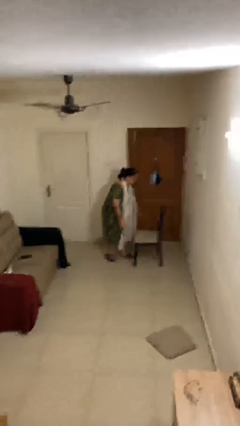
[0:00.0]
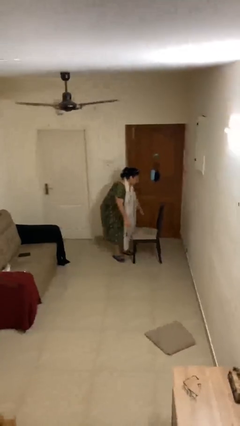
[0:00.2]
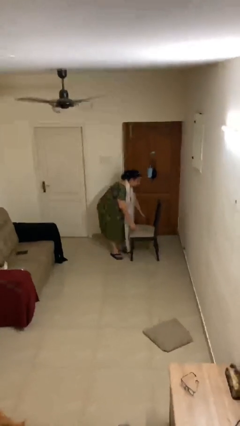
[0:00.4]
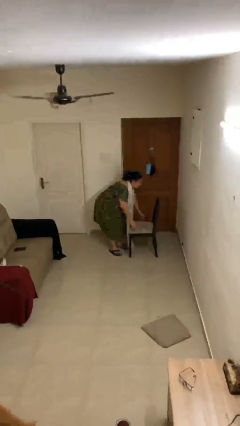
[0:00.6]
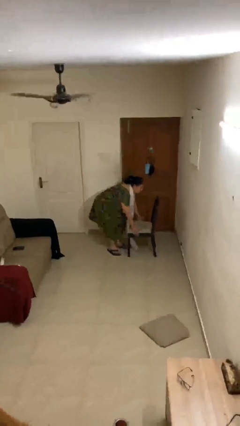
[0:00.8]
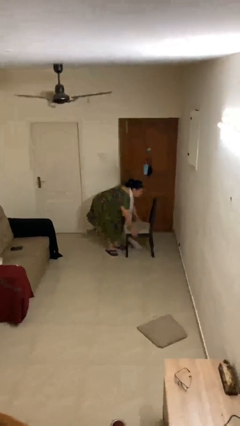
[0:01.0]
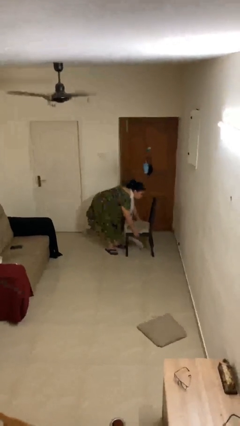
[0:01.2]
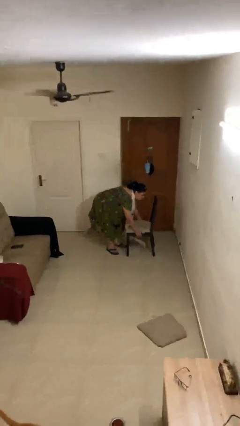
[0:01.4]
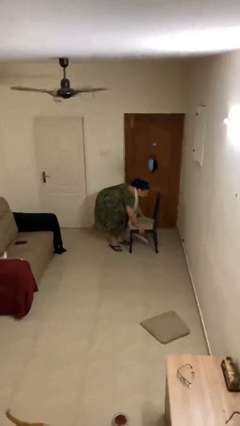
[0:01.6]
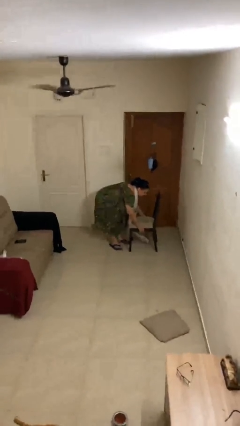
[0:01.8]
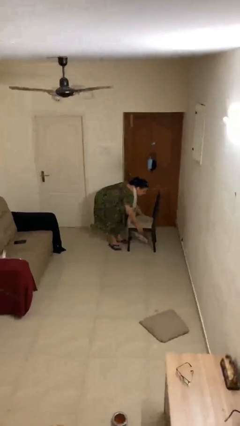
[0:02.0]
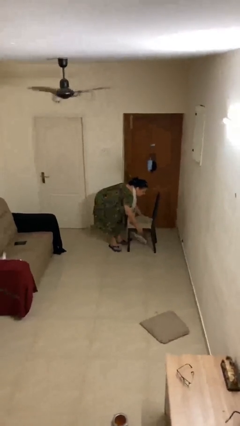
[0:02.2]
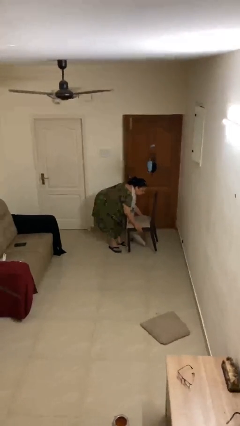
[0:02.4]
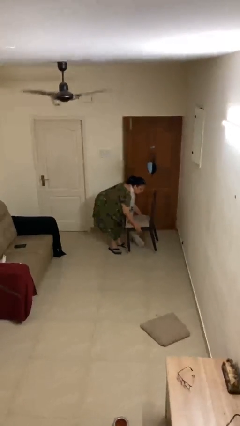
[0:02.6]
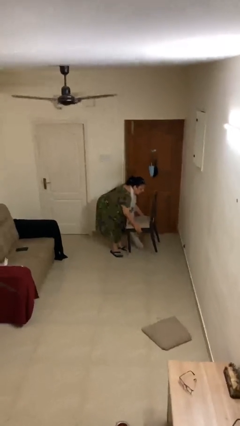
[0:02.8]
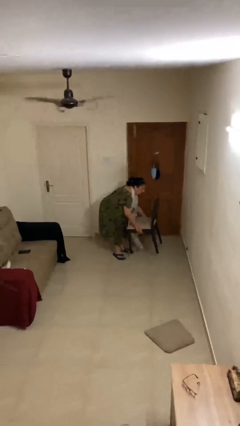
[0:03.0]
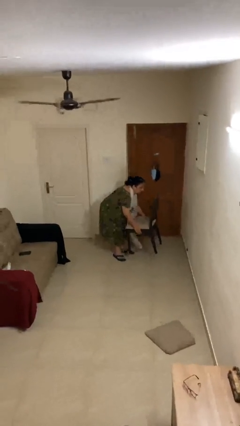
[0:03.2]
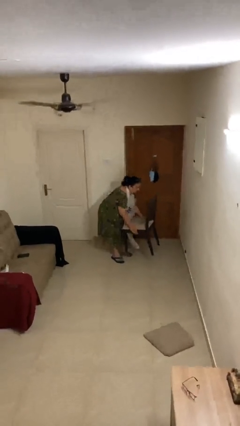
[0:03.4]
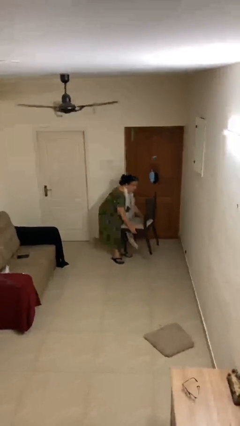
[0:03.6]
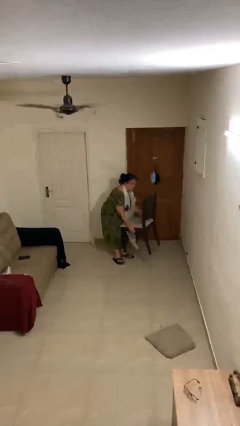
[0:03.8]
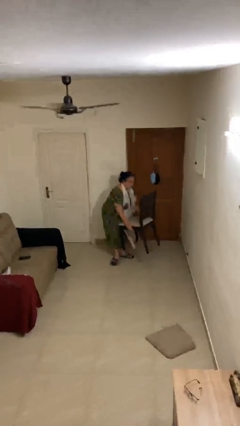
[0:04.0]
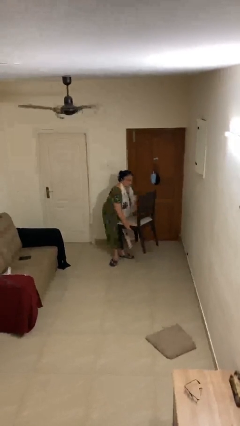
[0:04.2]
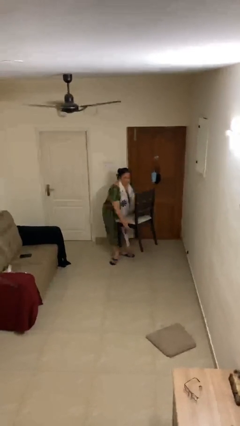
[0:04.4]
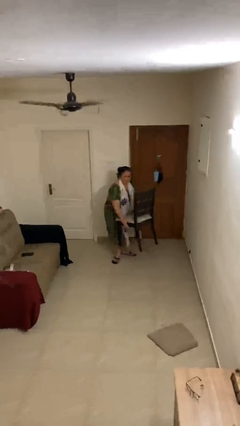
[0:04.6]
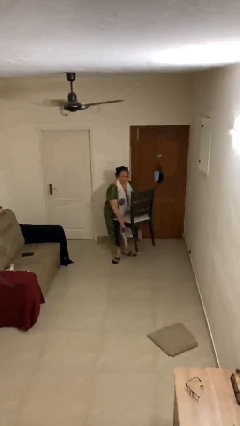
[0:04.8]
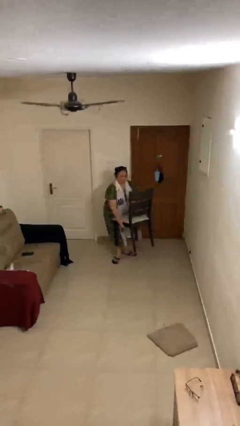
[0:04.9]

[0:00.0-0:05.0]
person picks up object from floor

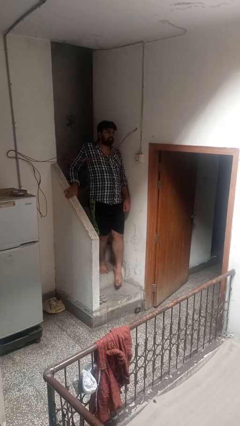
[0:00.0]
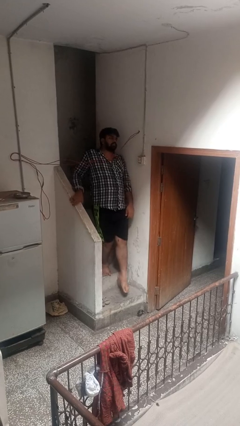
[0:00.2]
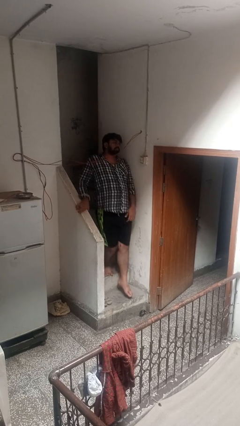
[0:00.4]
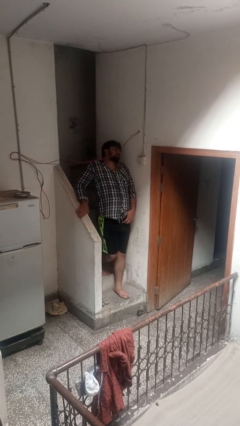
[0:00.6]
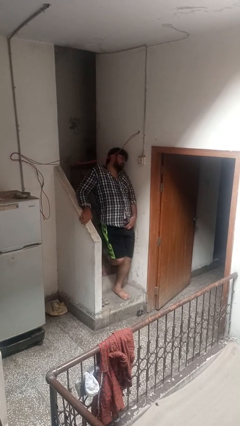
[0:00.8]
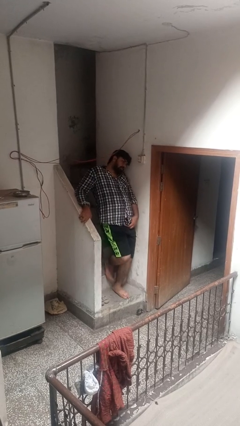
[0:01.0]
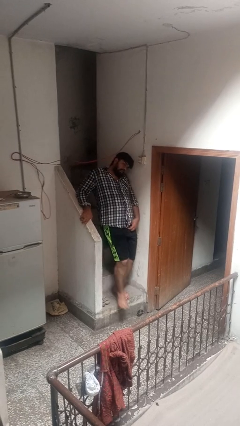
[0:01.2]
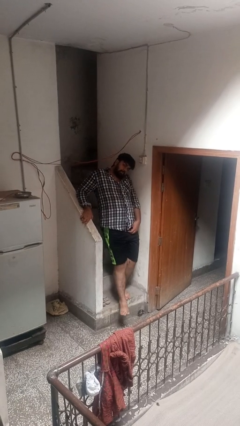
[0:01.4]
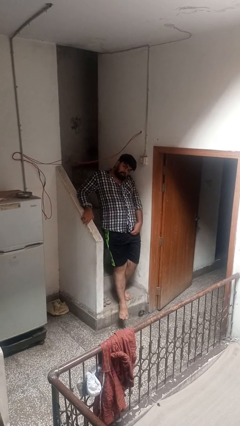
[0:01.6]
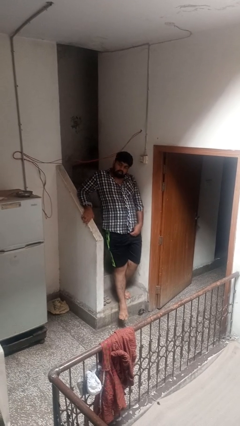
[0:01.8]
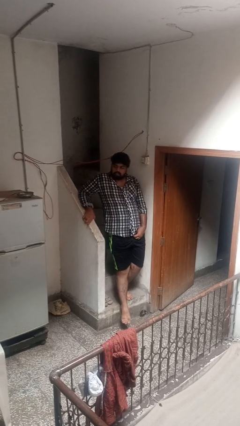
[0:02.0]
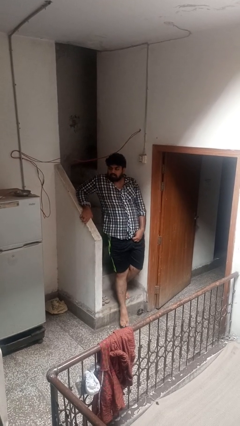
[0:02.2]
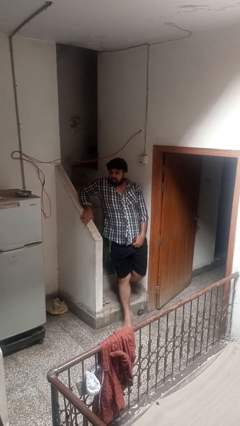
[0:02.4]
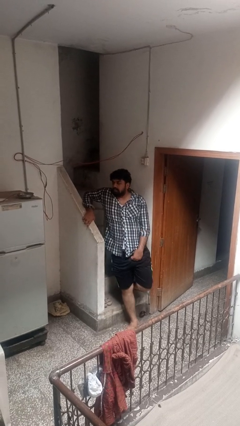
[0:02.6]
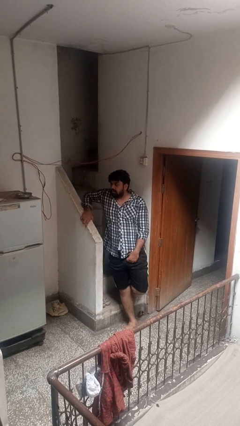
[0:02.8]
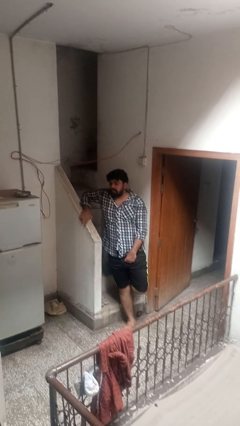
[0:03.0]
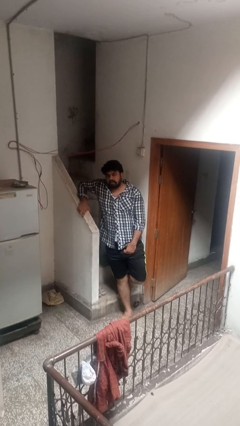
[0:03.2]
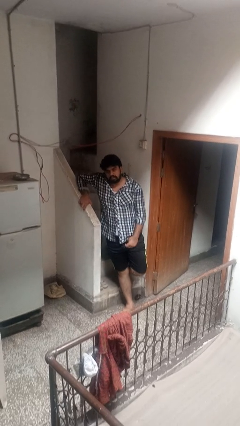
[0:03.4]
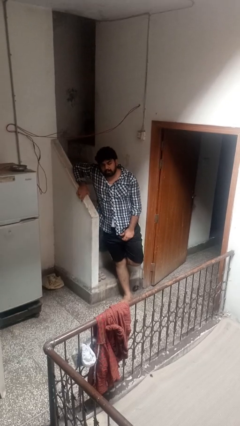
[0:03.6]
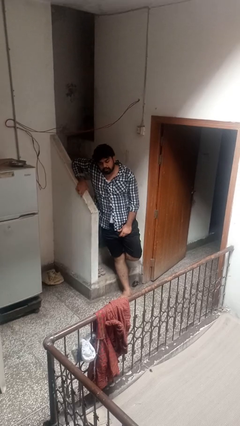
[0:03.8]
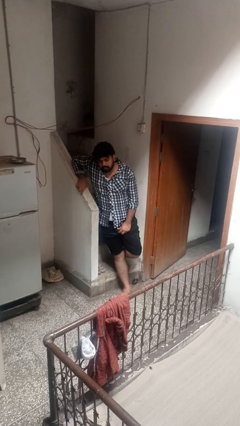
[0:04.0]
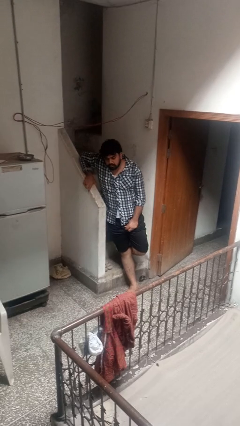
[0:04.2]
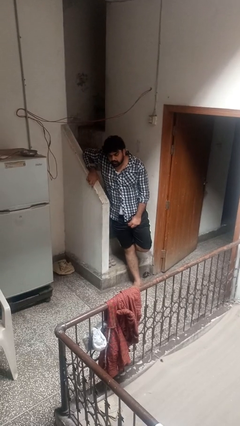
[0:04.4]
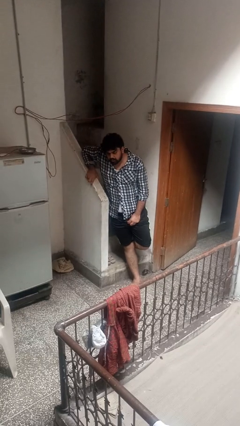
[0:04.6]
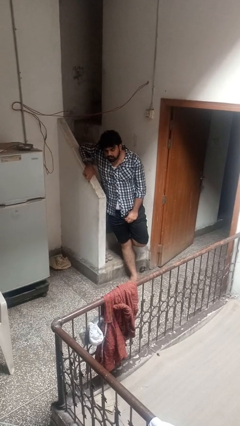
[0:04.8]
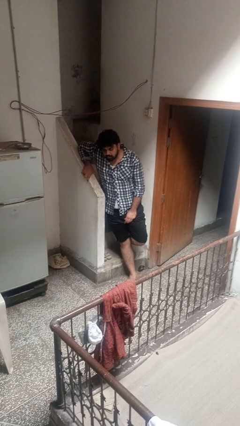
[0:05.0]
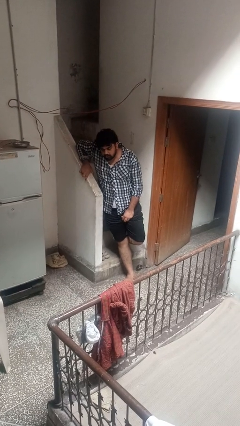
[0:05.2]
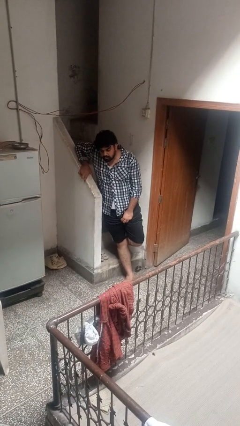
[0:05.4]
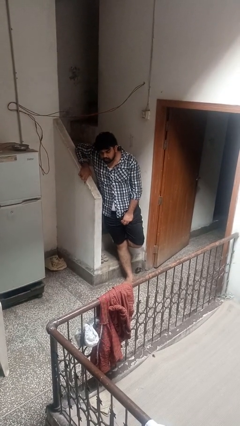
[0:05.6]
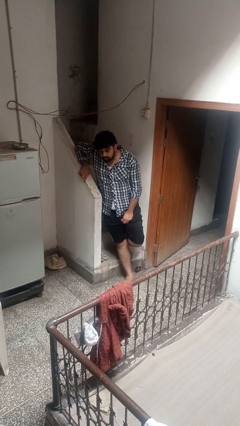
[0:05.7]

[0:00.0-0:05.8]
person trips on stair

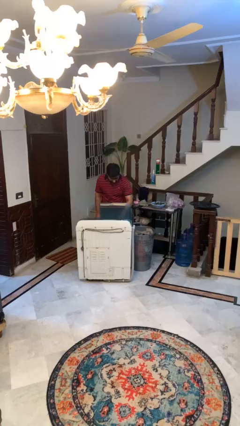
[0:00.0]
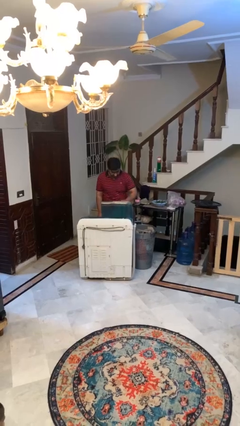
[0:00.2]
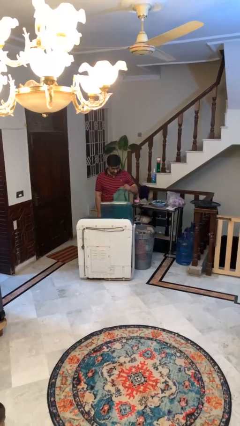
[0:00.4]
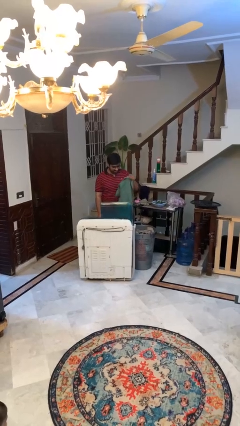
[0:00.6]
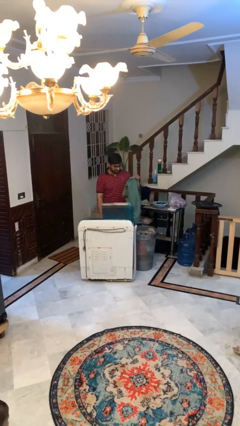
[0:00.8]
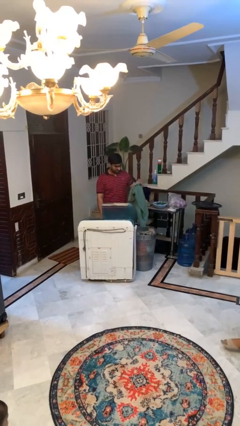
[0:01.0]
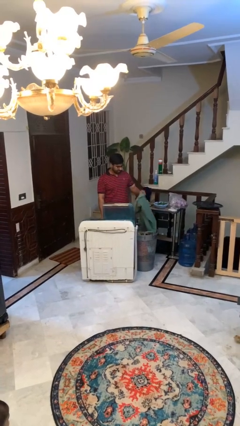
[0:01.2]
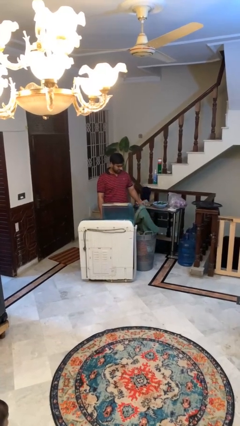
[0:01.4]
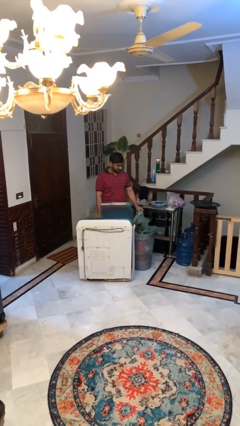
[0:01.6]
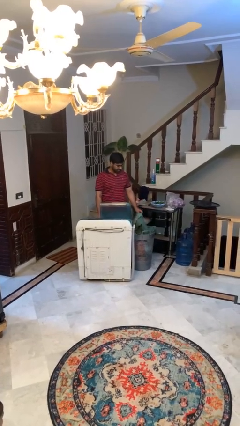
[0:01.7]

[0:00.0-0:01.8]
person unloads clotheswasher

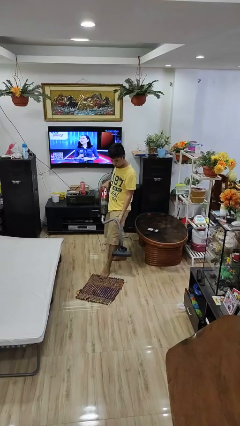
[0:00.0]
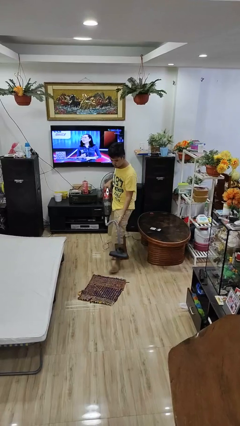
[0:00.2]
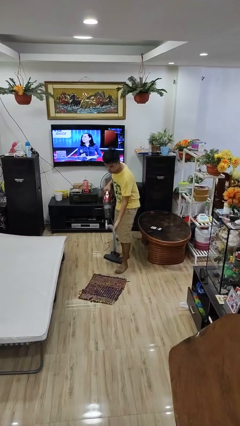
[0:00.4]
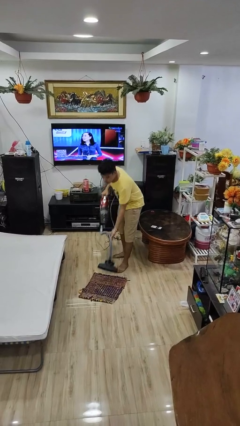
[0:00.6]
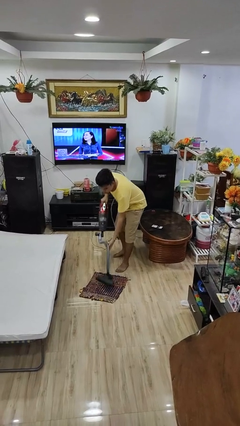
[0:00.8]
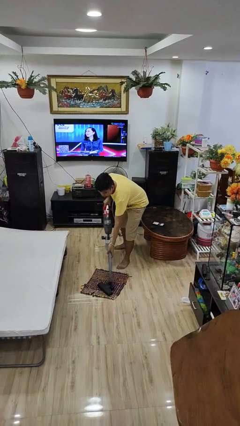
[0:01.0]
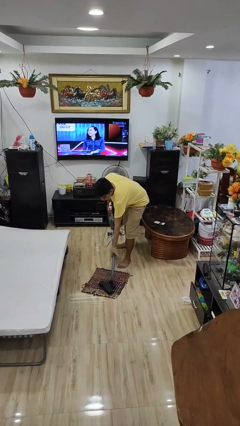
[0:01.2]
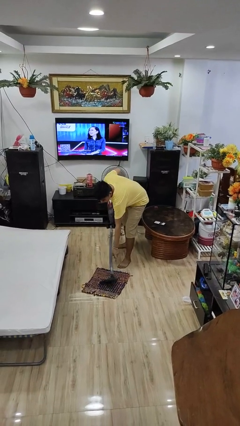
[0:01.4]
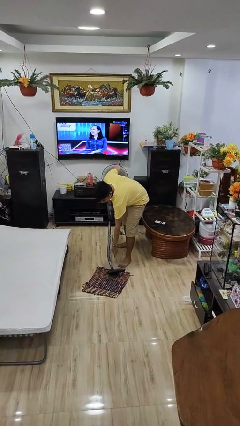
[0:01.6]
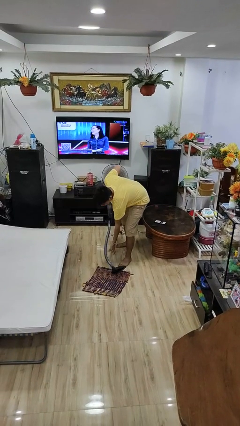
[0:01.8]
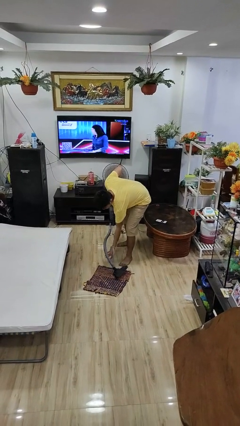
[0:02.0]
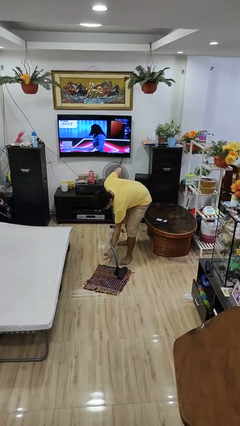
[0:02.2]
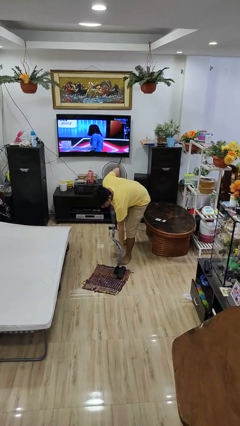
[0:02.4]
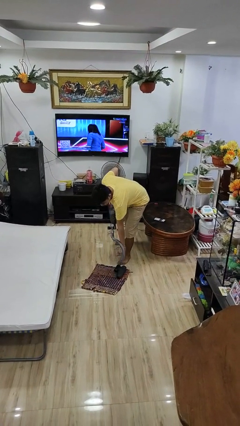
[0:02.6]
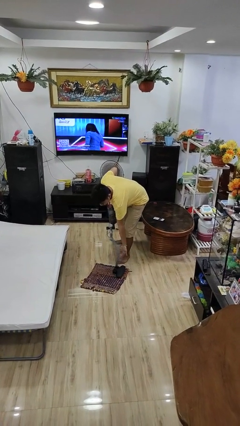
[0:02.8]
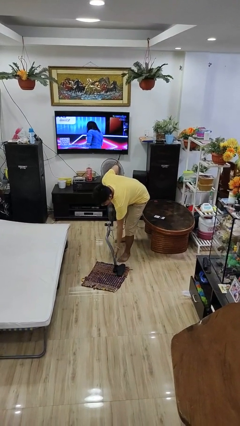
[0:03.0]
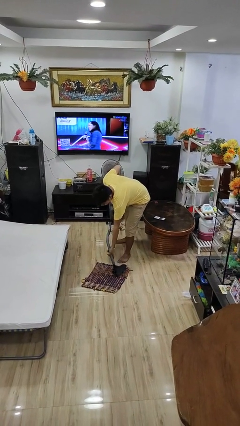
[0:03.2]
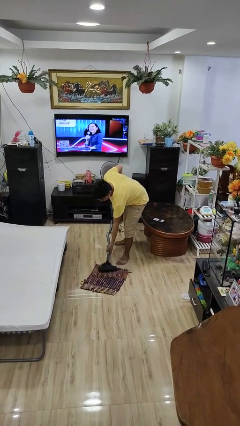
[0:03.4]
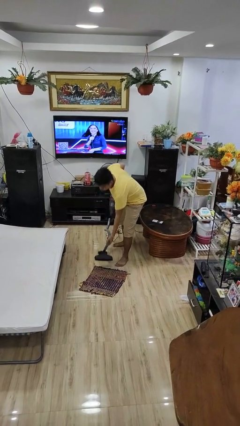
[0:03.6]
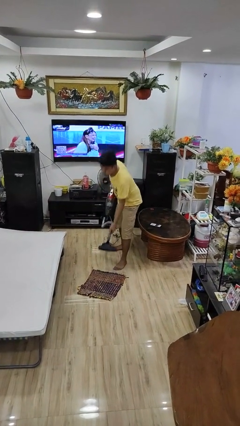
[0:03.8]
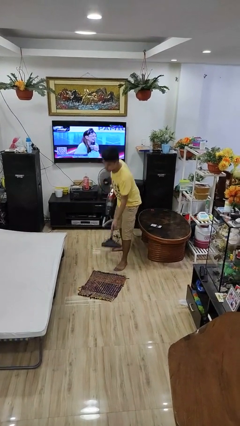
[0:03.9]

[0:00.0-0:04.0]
person vacuums carpet

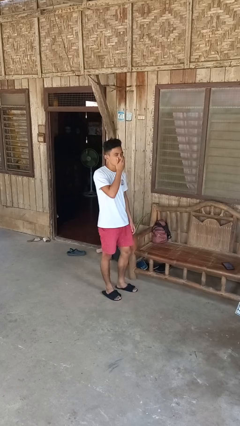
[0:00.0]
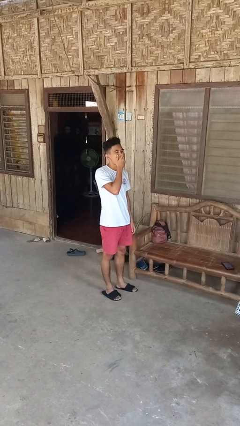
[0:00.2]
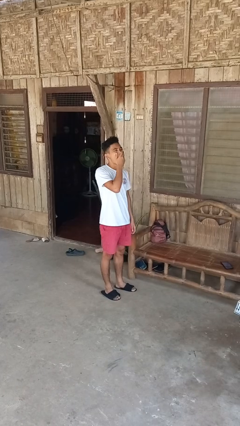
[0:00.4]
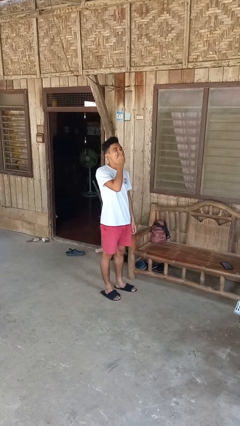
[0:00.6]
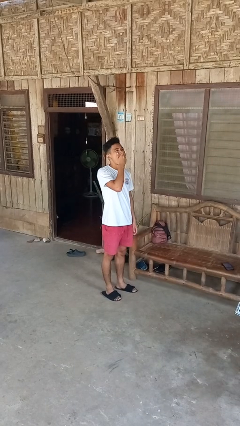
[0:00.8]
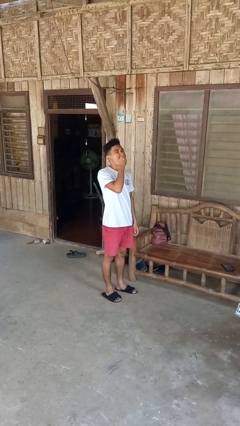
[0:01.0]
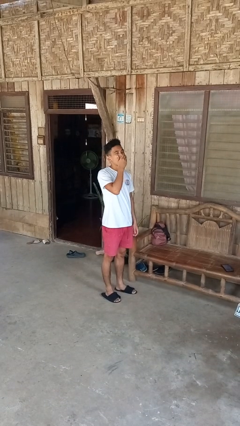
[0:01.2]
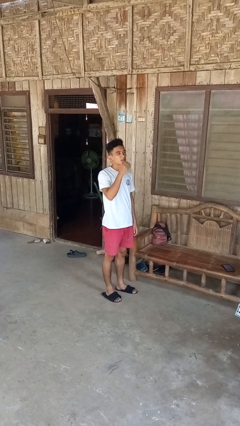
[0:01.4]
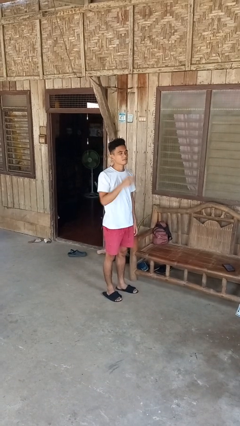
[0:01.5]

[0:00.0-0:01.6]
person yawns
